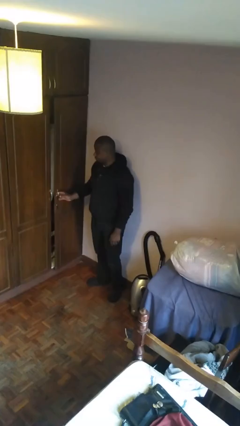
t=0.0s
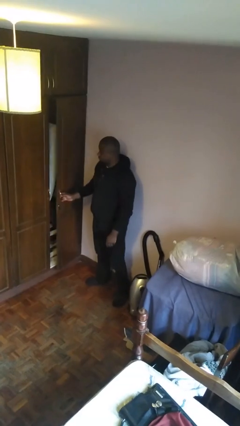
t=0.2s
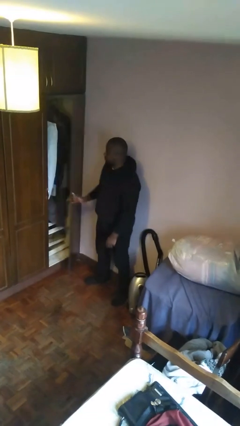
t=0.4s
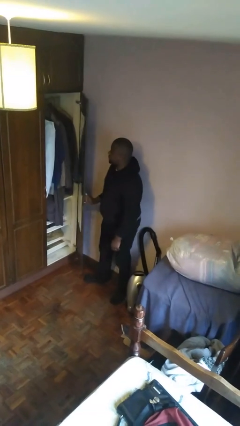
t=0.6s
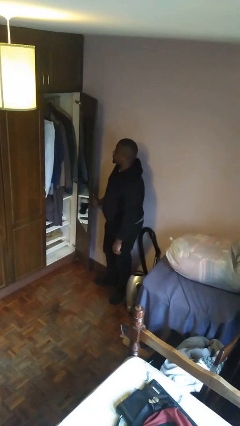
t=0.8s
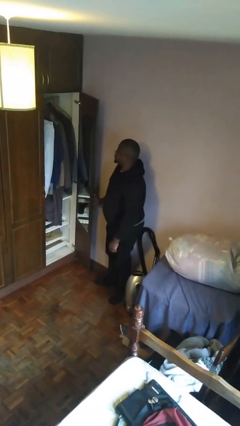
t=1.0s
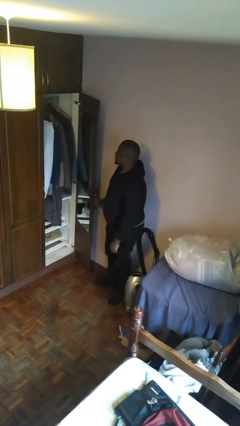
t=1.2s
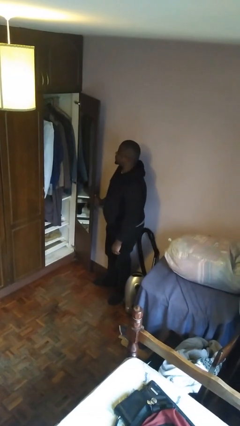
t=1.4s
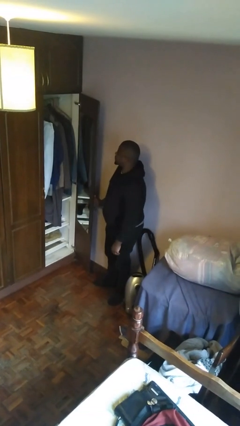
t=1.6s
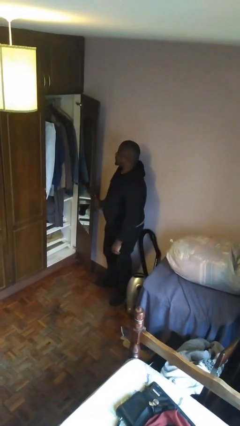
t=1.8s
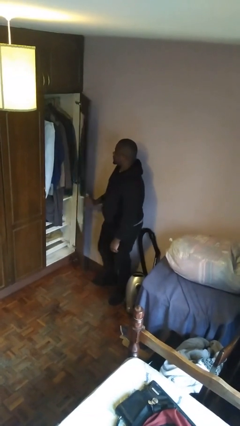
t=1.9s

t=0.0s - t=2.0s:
person opens closet door

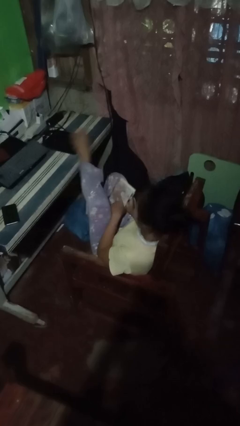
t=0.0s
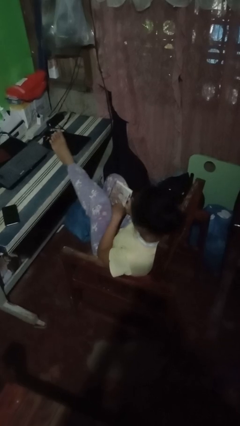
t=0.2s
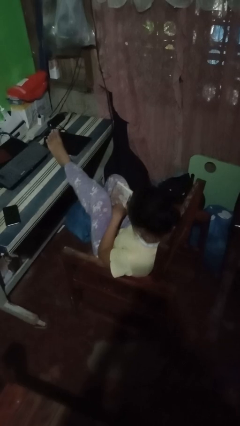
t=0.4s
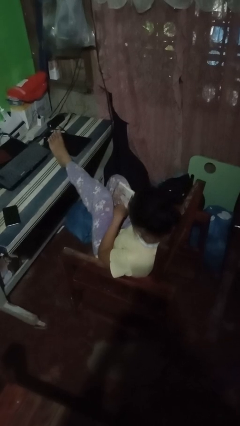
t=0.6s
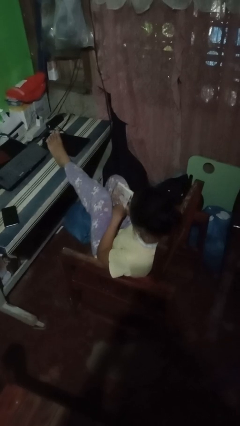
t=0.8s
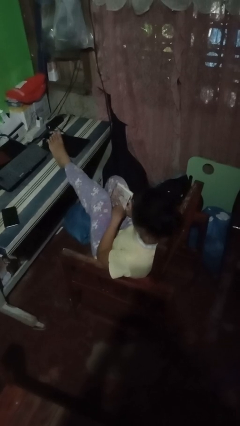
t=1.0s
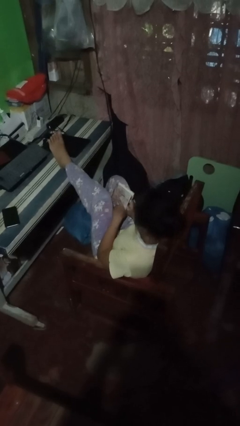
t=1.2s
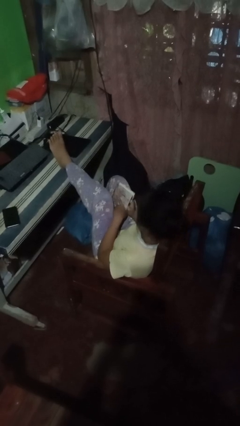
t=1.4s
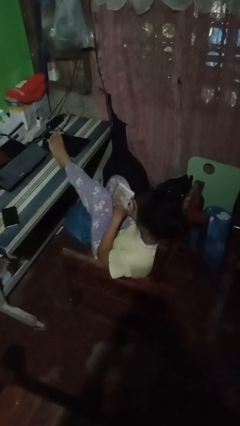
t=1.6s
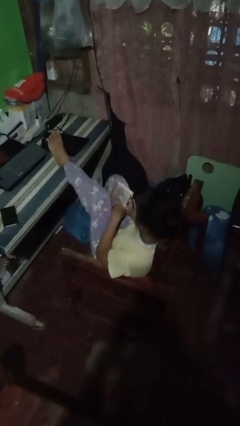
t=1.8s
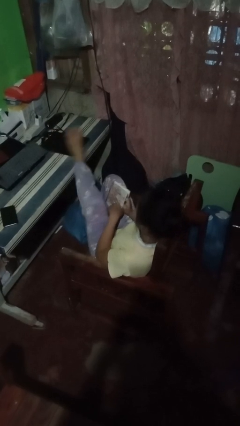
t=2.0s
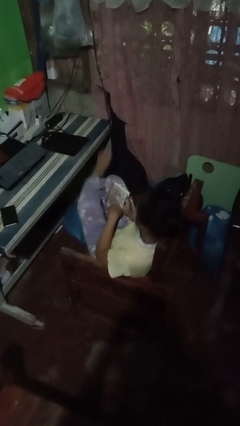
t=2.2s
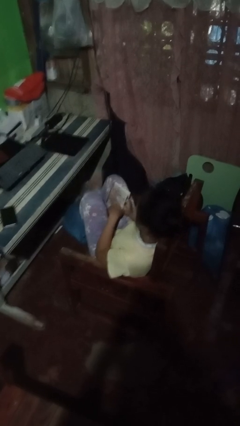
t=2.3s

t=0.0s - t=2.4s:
person puts feet up

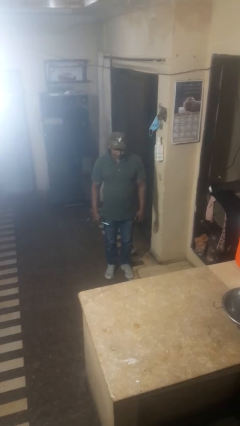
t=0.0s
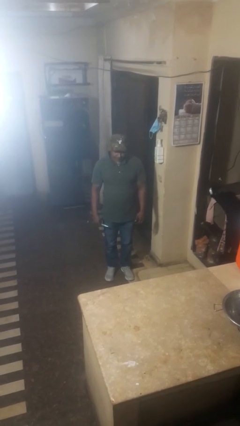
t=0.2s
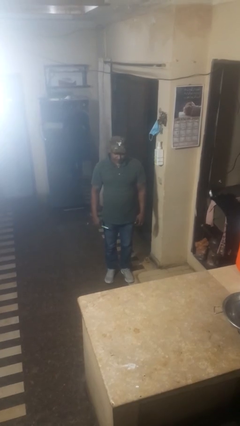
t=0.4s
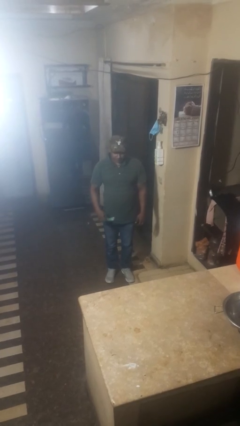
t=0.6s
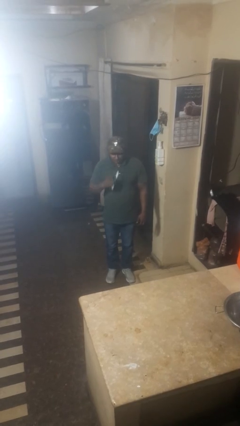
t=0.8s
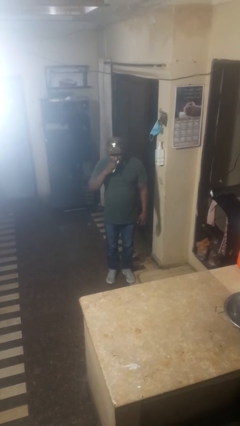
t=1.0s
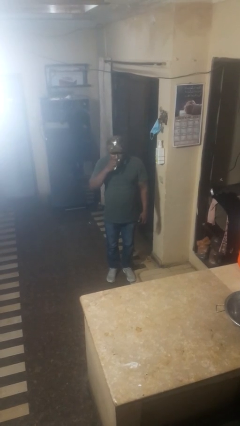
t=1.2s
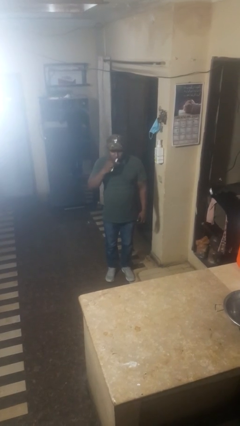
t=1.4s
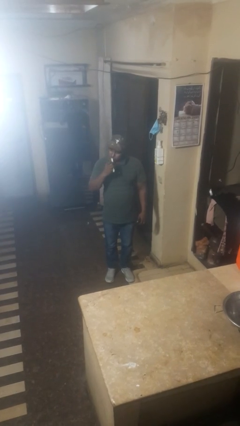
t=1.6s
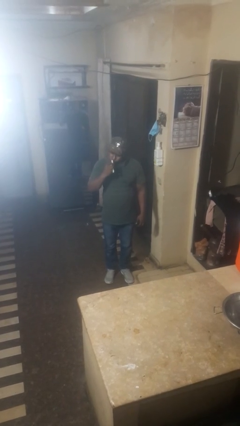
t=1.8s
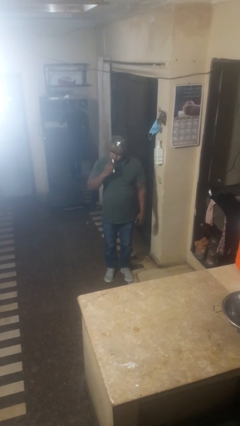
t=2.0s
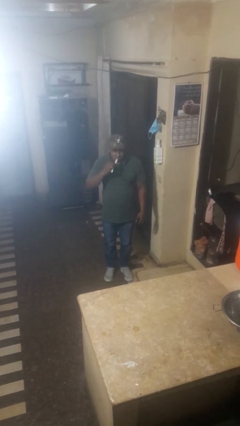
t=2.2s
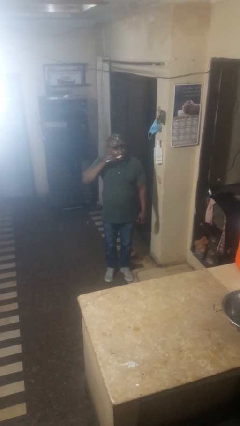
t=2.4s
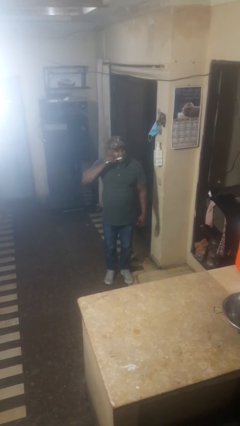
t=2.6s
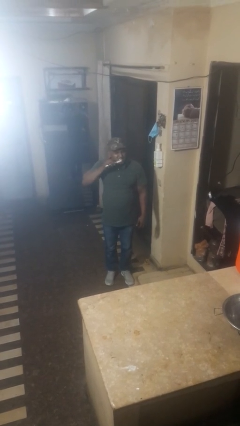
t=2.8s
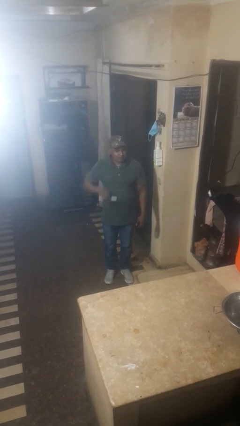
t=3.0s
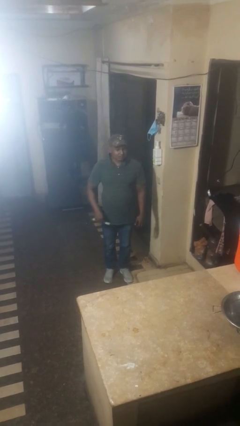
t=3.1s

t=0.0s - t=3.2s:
person brushes teeth

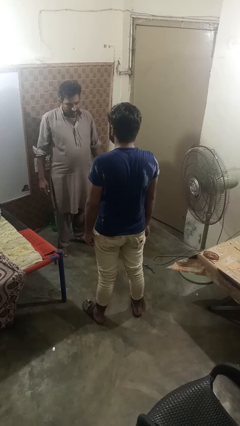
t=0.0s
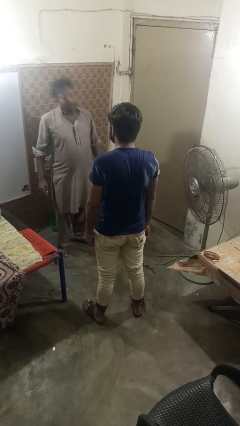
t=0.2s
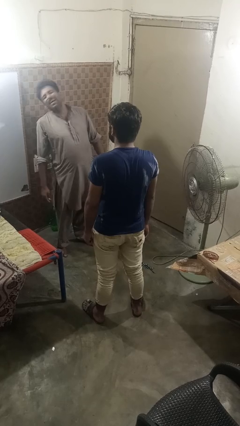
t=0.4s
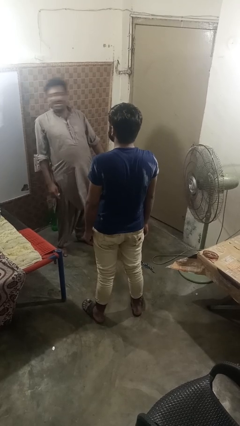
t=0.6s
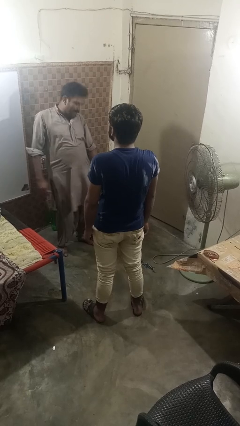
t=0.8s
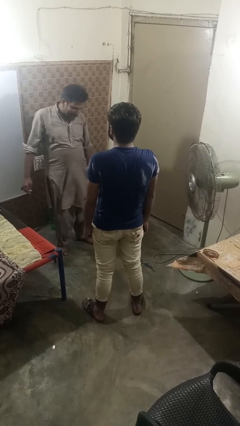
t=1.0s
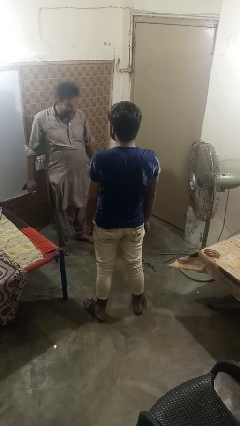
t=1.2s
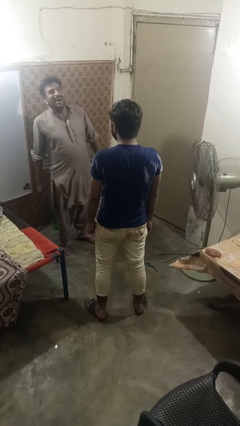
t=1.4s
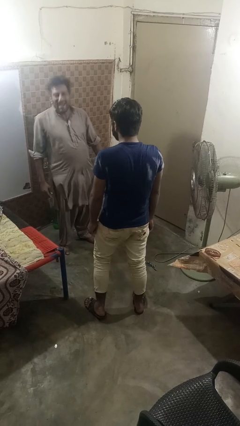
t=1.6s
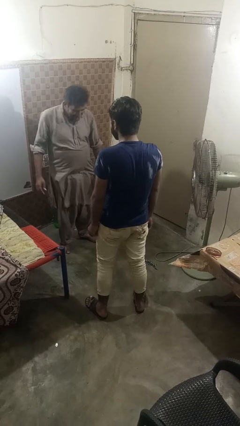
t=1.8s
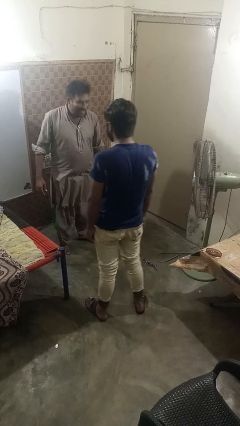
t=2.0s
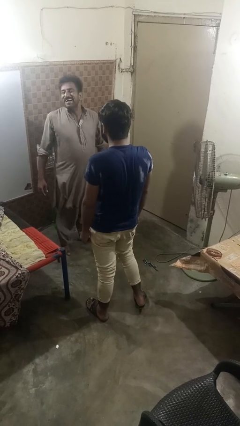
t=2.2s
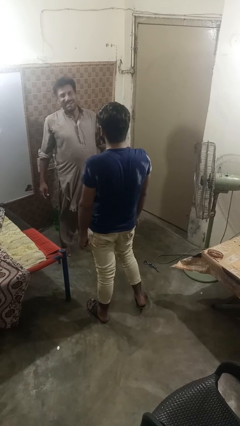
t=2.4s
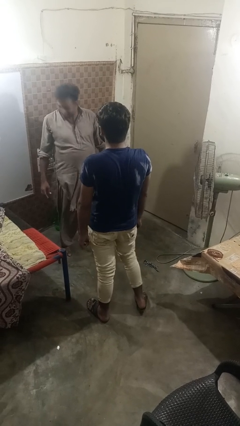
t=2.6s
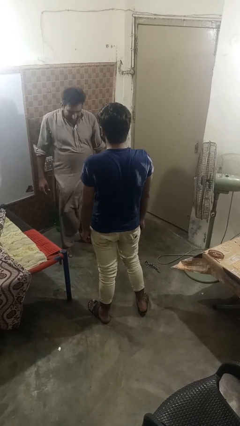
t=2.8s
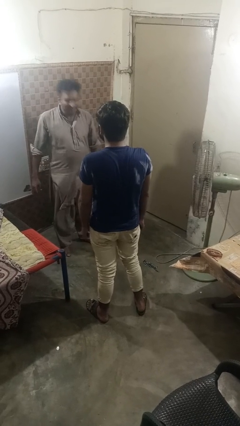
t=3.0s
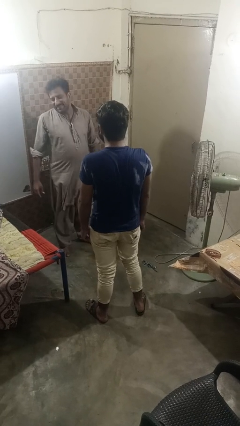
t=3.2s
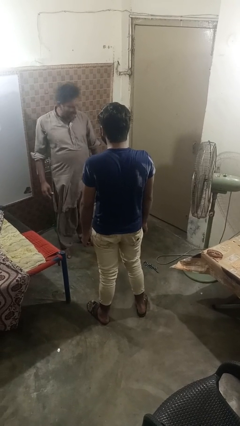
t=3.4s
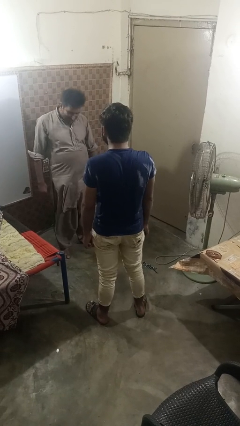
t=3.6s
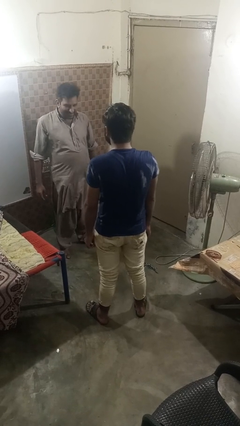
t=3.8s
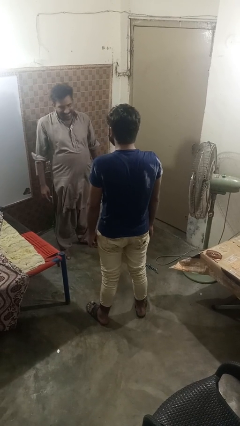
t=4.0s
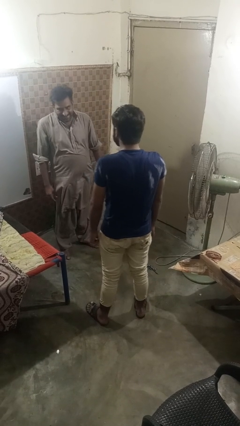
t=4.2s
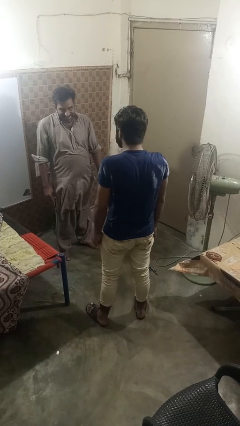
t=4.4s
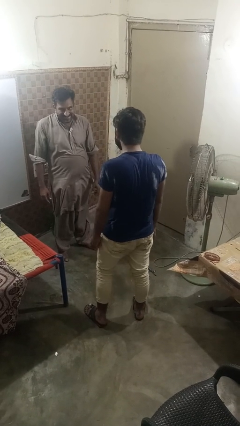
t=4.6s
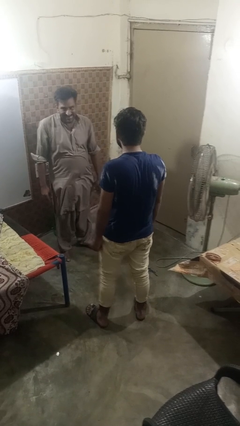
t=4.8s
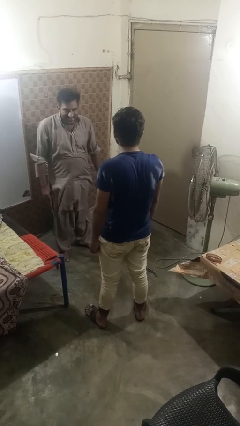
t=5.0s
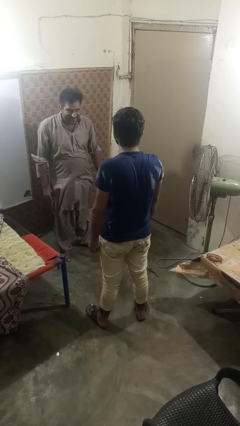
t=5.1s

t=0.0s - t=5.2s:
person laughs with person

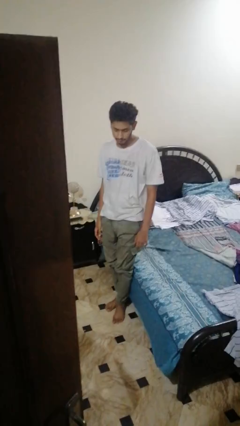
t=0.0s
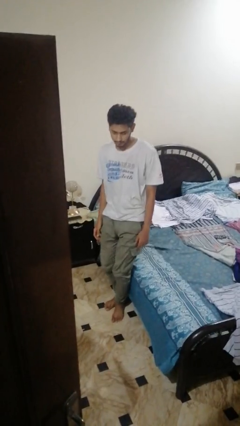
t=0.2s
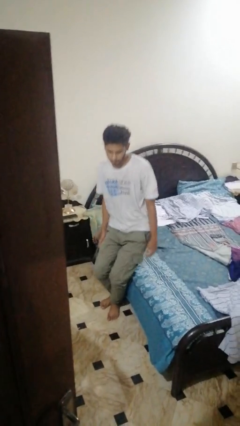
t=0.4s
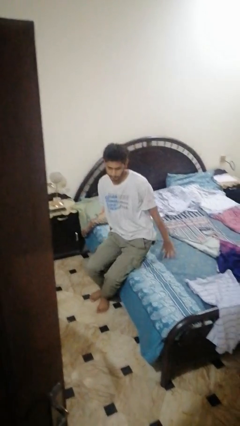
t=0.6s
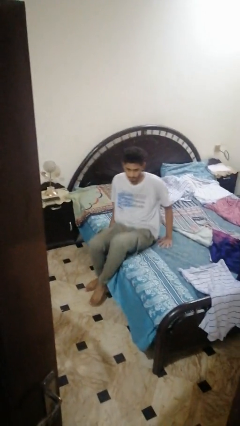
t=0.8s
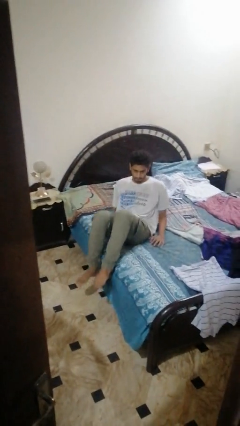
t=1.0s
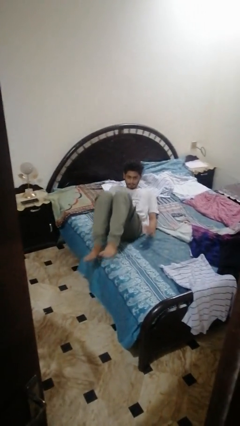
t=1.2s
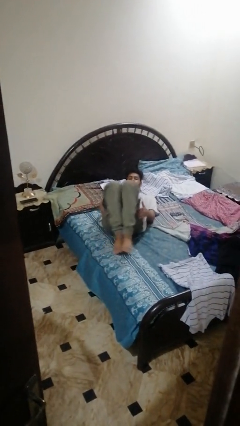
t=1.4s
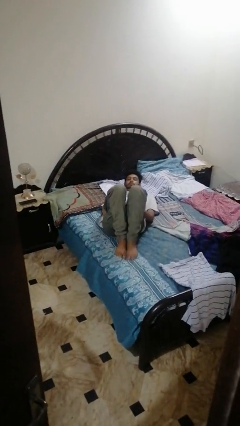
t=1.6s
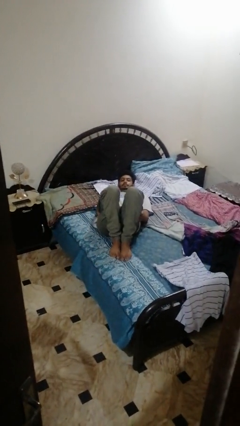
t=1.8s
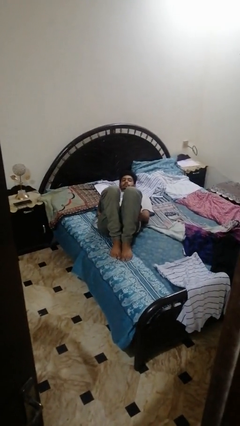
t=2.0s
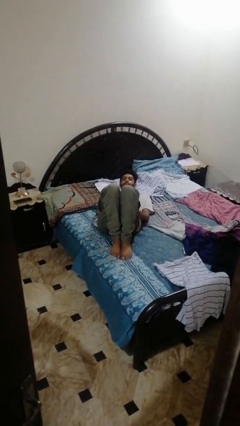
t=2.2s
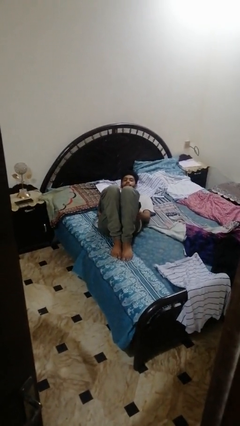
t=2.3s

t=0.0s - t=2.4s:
person lies down on bed

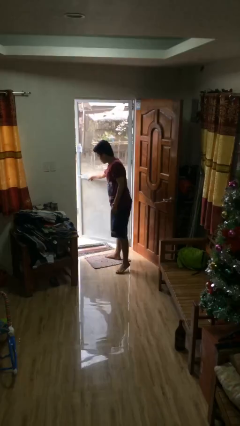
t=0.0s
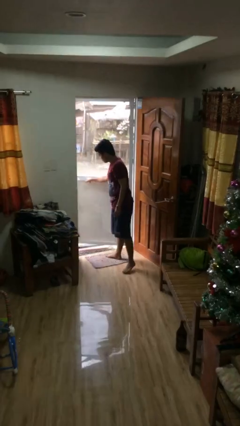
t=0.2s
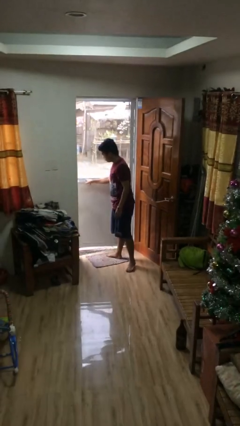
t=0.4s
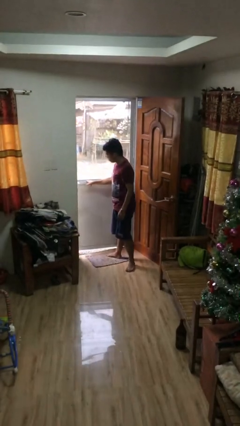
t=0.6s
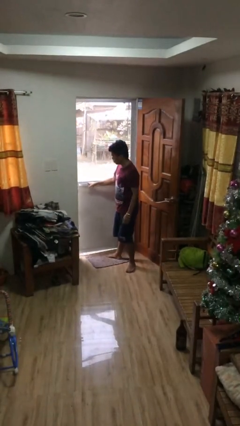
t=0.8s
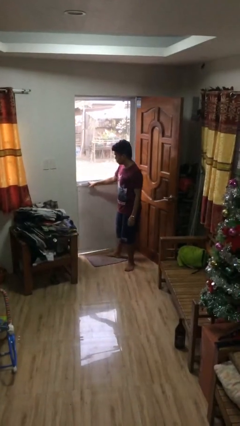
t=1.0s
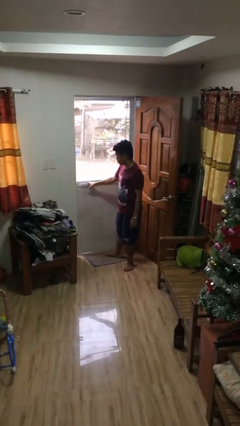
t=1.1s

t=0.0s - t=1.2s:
person closes facility door

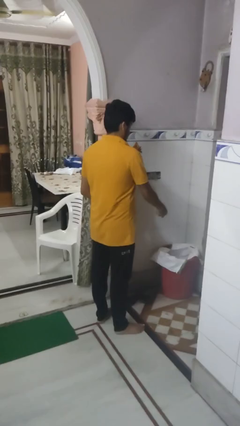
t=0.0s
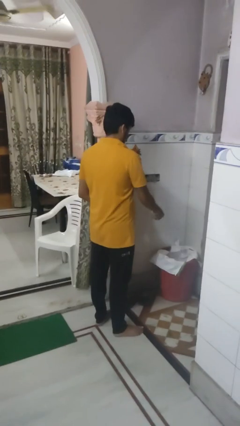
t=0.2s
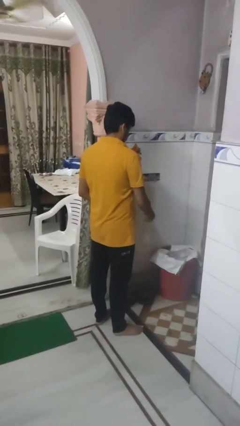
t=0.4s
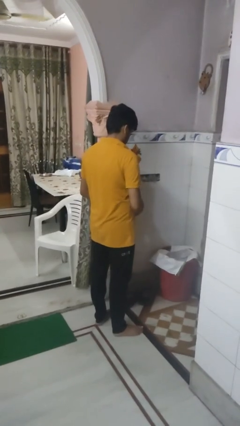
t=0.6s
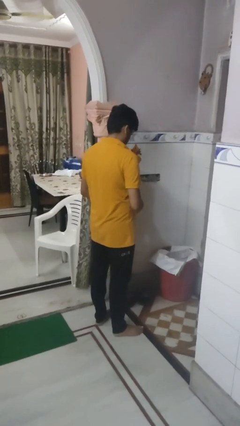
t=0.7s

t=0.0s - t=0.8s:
person discards trash
